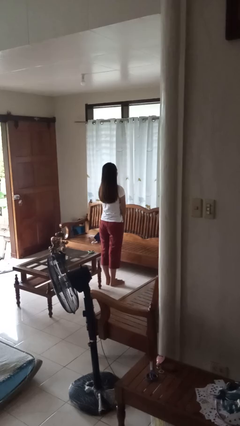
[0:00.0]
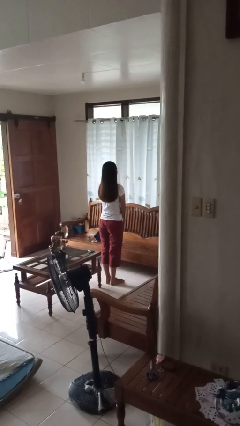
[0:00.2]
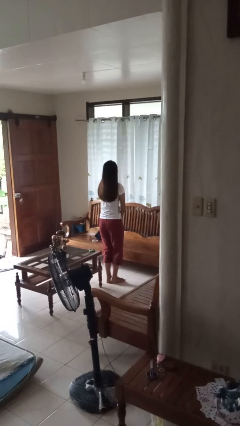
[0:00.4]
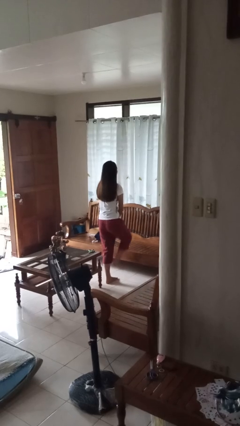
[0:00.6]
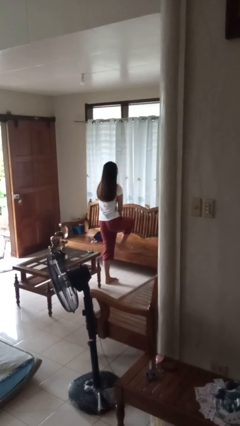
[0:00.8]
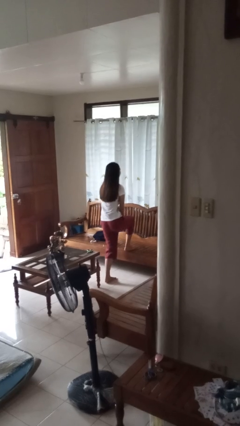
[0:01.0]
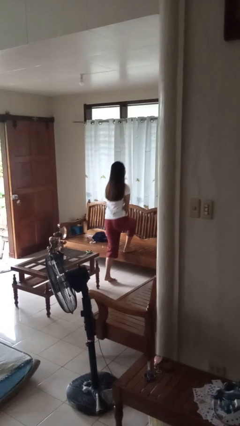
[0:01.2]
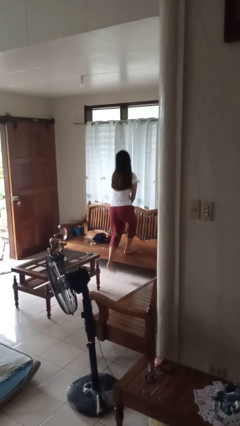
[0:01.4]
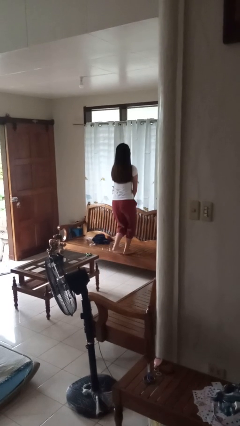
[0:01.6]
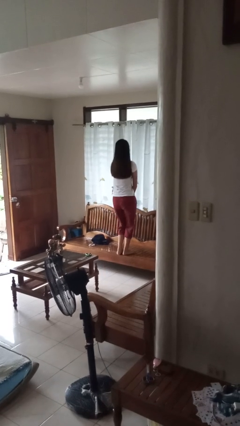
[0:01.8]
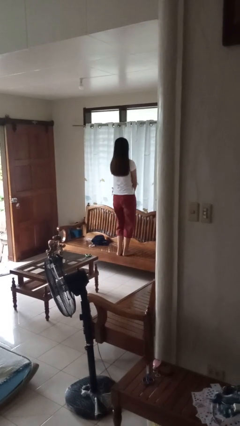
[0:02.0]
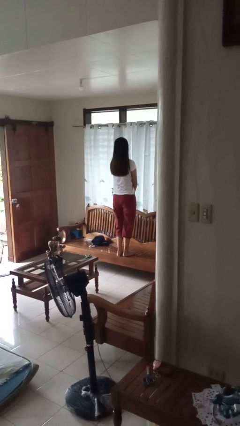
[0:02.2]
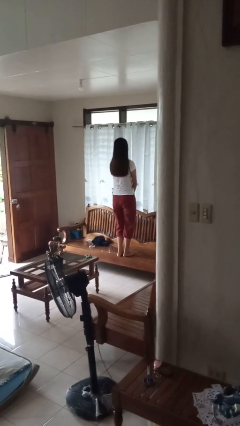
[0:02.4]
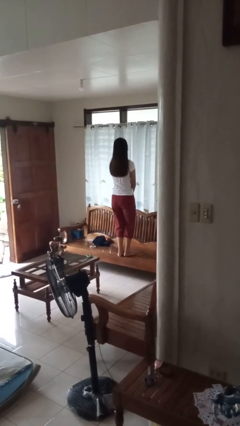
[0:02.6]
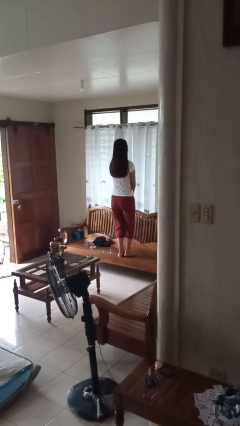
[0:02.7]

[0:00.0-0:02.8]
person climbs on chair

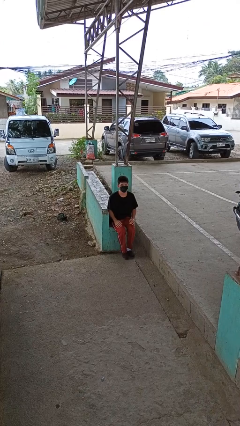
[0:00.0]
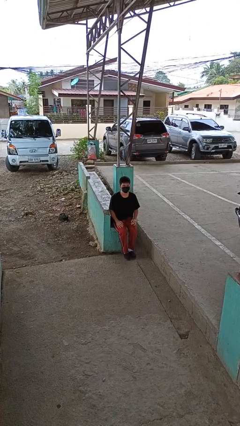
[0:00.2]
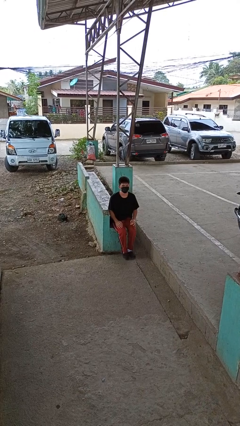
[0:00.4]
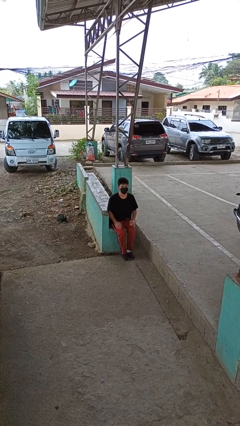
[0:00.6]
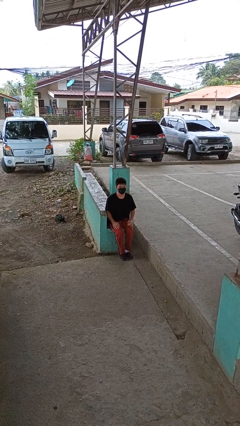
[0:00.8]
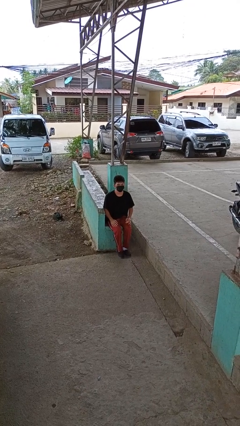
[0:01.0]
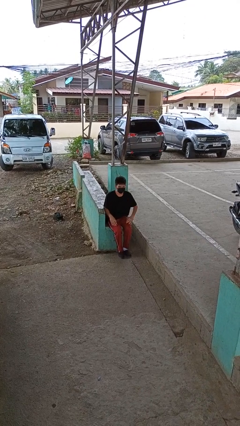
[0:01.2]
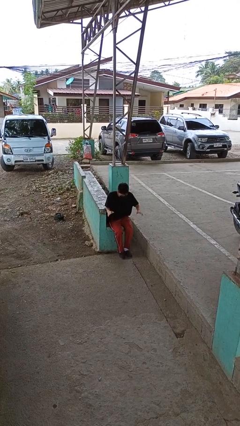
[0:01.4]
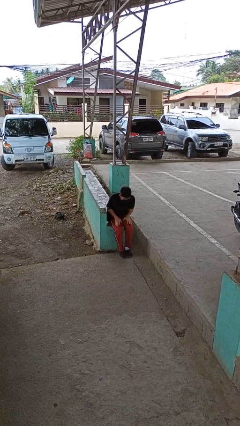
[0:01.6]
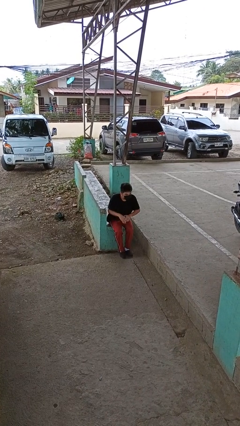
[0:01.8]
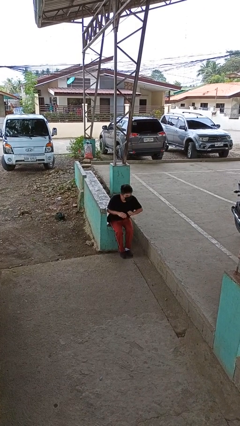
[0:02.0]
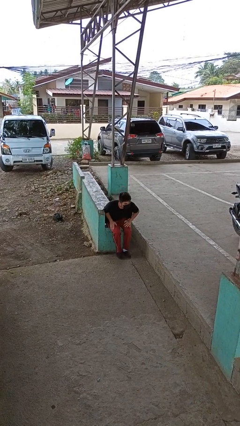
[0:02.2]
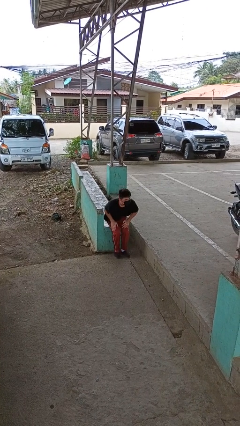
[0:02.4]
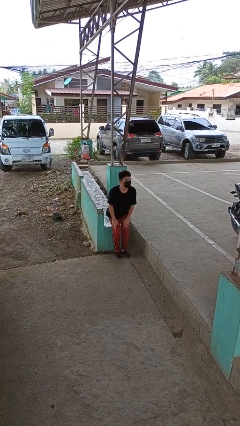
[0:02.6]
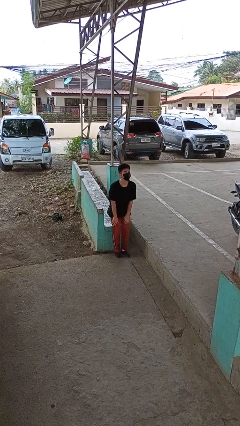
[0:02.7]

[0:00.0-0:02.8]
person slaps hands on thighs

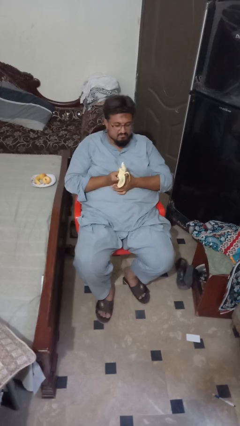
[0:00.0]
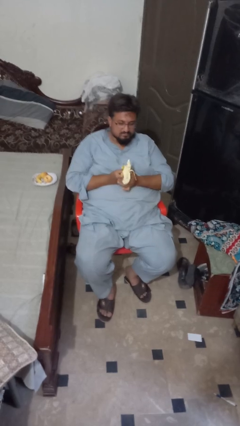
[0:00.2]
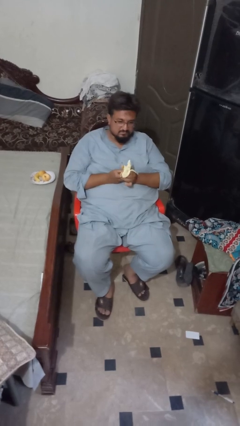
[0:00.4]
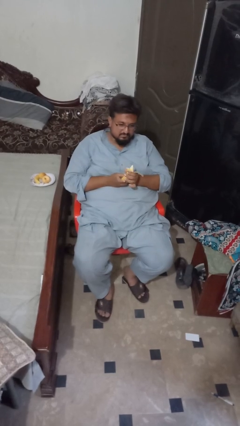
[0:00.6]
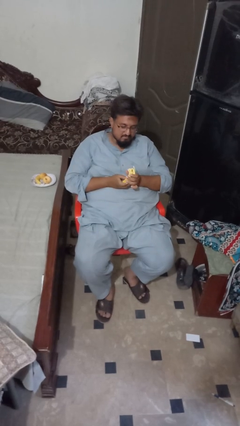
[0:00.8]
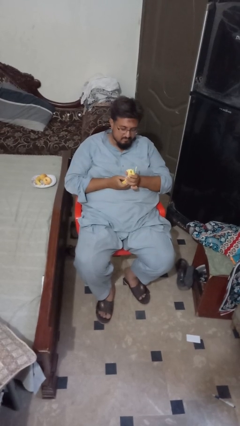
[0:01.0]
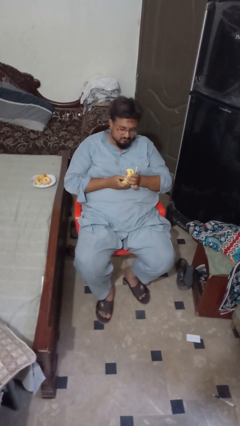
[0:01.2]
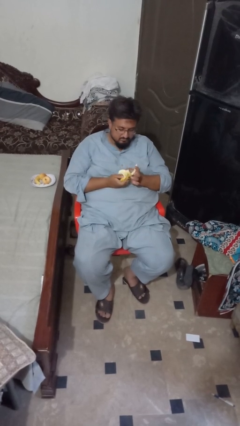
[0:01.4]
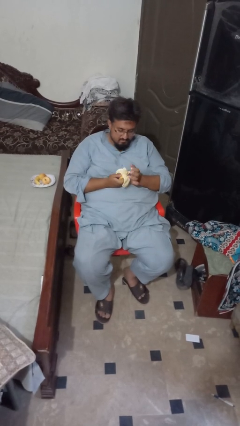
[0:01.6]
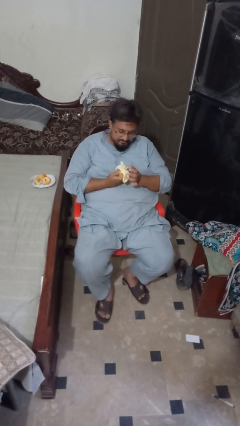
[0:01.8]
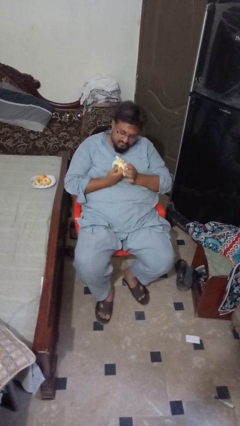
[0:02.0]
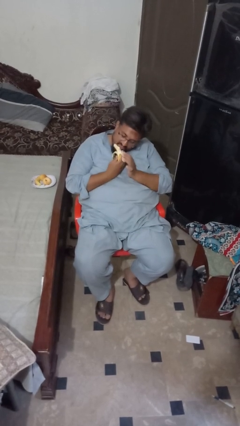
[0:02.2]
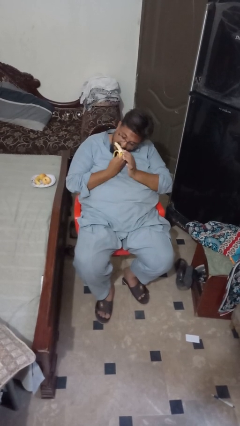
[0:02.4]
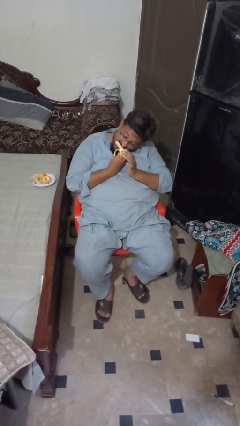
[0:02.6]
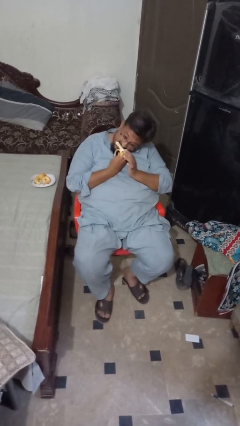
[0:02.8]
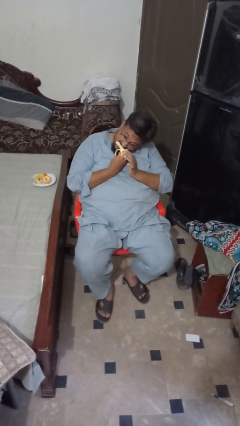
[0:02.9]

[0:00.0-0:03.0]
person eats banana

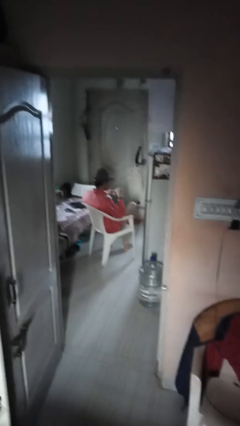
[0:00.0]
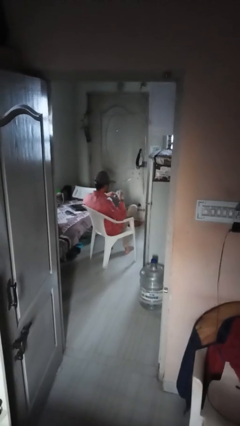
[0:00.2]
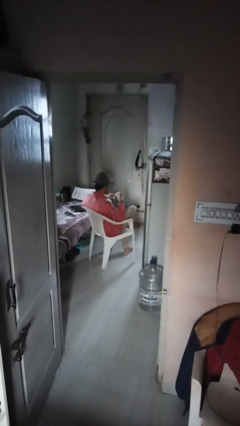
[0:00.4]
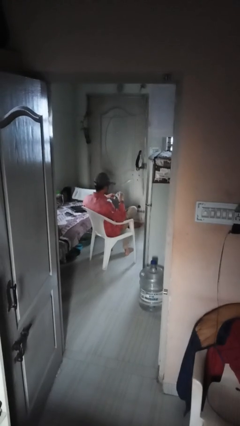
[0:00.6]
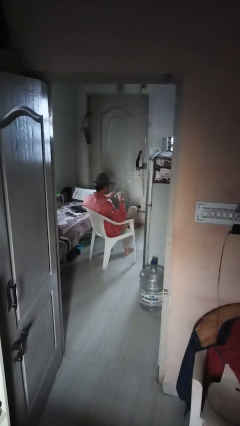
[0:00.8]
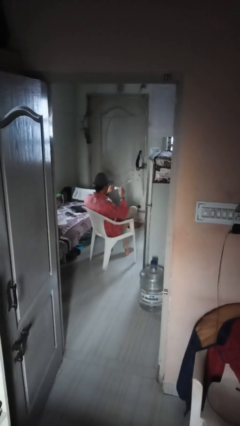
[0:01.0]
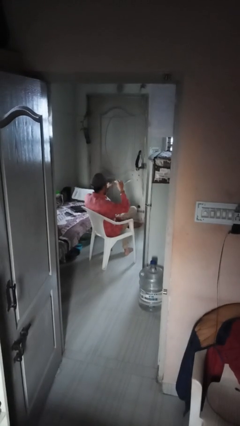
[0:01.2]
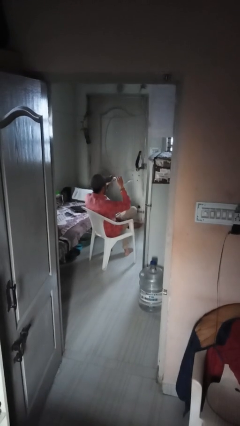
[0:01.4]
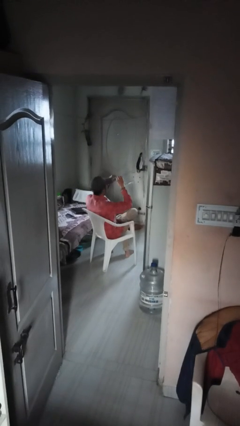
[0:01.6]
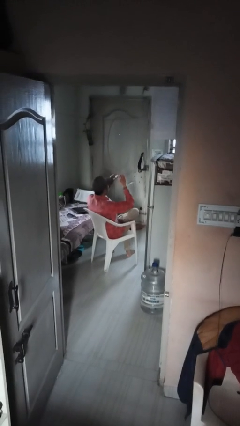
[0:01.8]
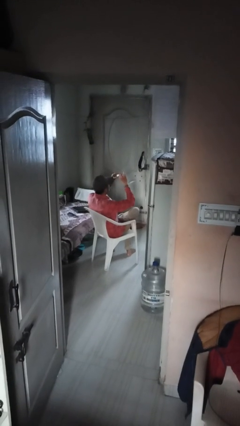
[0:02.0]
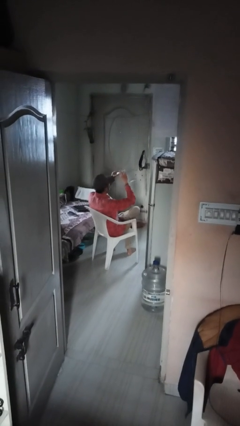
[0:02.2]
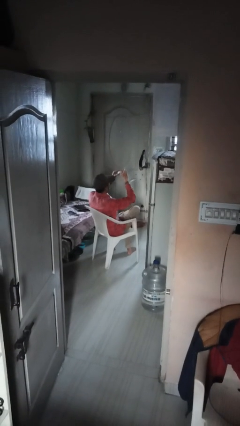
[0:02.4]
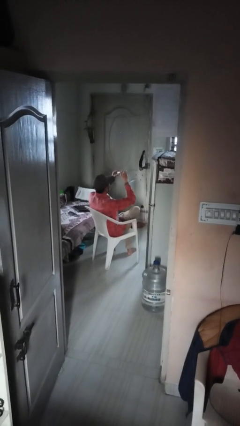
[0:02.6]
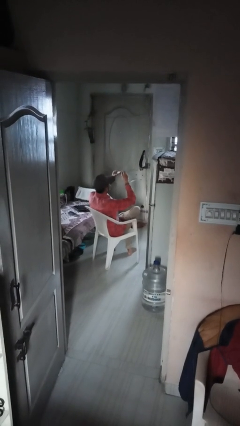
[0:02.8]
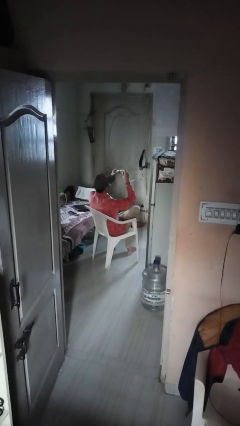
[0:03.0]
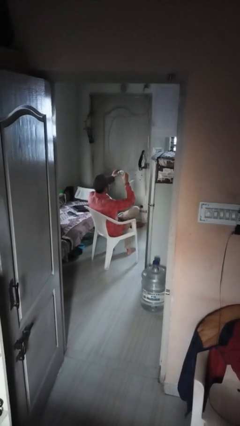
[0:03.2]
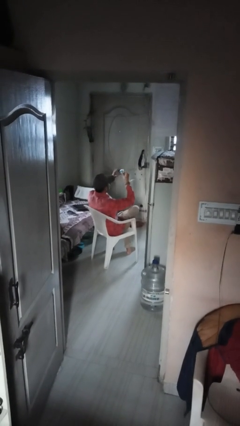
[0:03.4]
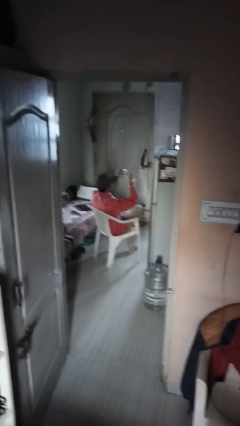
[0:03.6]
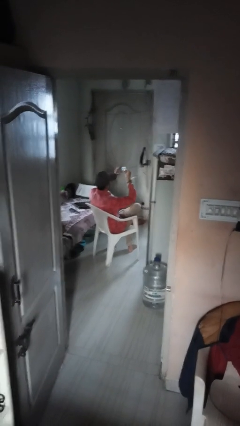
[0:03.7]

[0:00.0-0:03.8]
person squeezes object

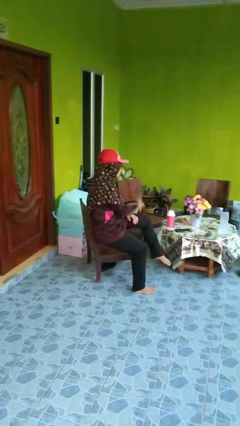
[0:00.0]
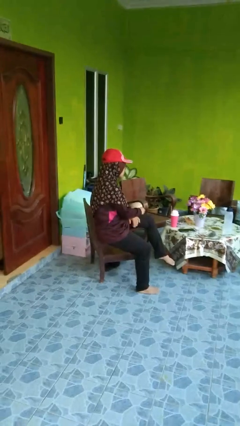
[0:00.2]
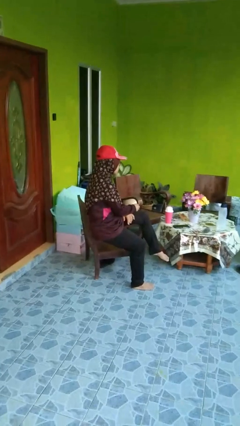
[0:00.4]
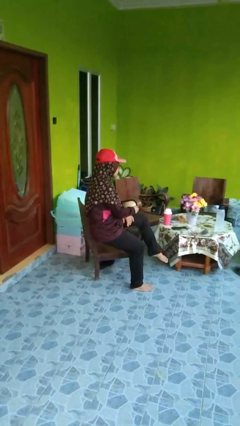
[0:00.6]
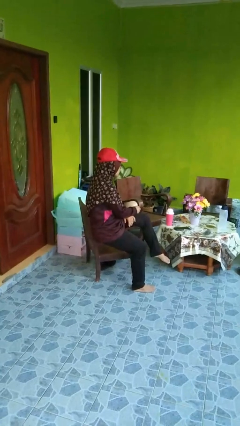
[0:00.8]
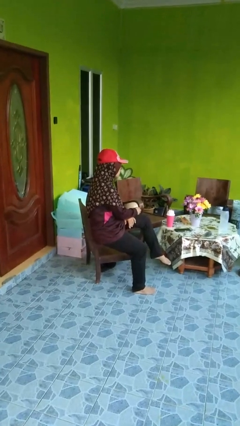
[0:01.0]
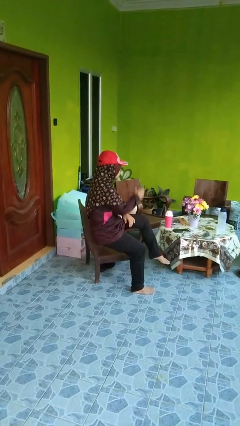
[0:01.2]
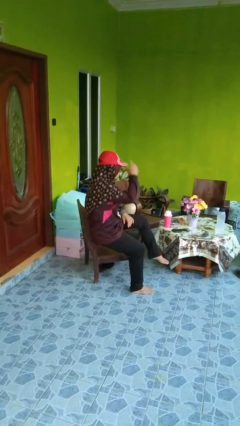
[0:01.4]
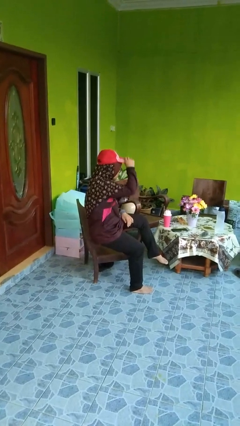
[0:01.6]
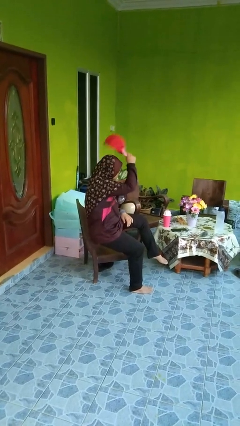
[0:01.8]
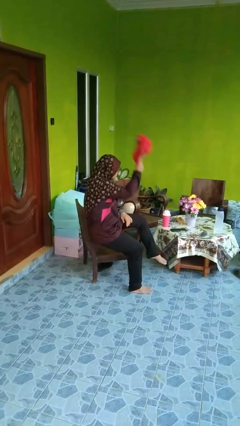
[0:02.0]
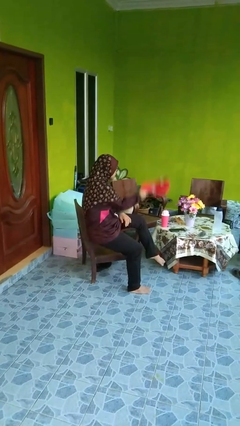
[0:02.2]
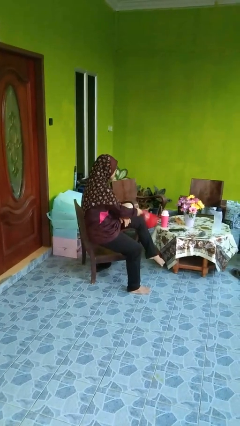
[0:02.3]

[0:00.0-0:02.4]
person puts on hat

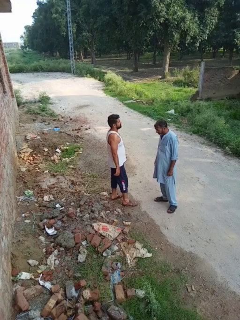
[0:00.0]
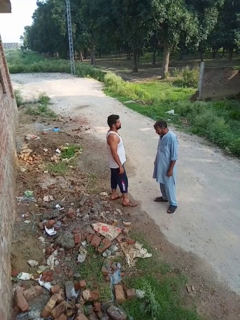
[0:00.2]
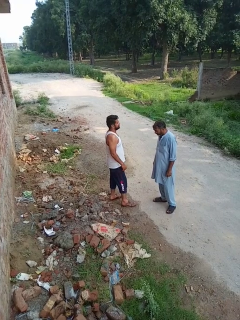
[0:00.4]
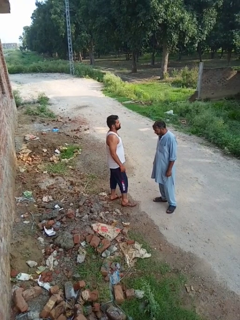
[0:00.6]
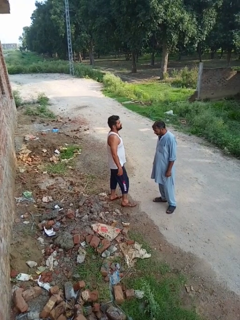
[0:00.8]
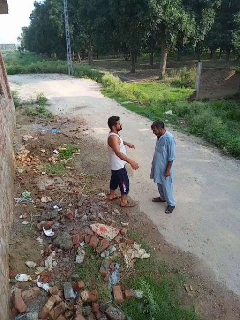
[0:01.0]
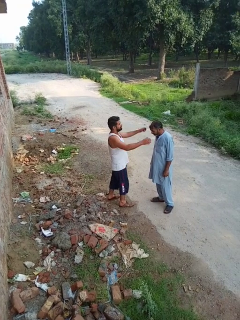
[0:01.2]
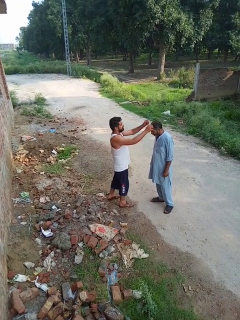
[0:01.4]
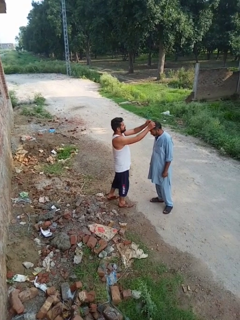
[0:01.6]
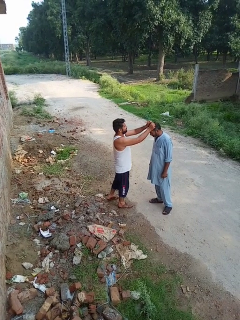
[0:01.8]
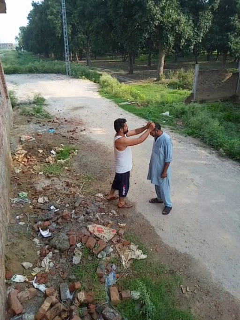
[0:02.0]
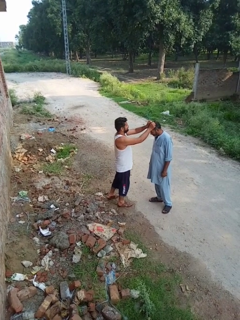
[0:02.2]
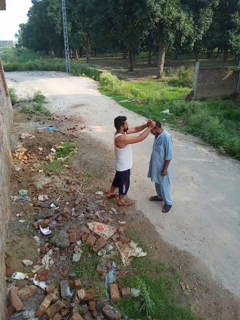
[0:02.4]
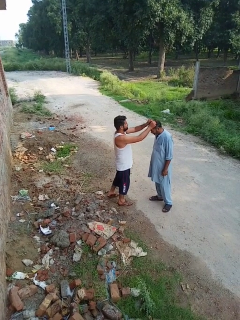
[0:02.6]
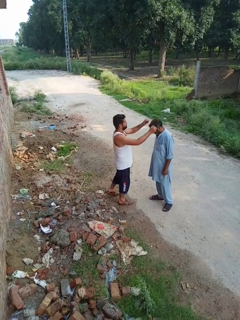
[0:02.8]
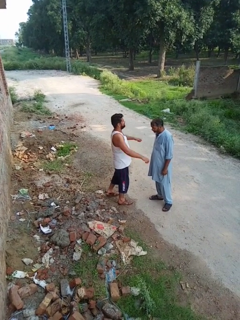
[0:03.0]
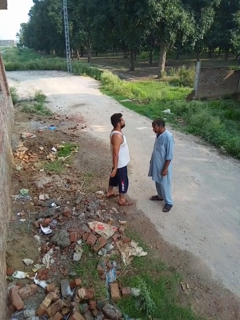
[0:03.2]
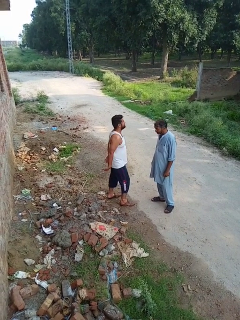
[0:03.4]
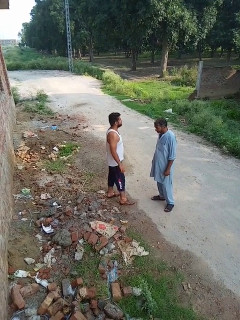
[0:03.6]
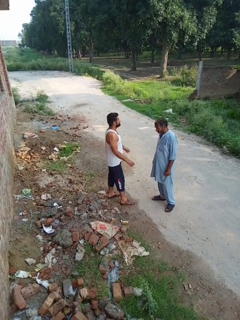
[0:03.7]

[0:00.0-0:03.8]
person grabs person by hair
